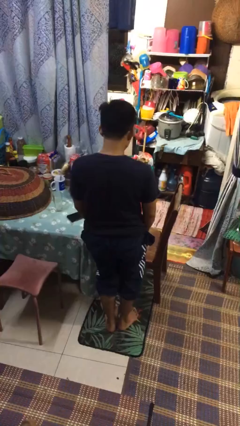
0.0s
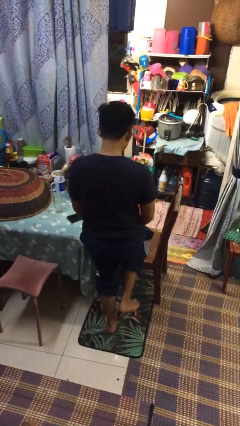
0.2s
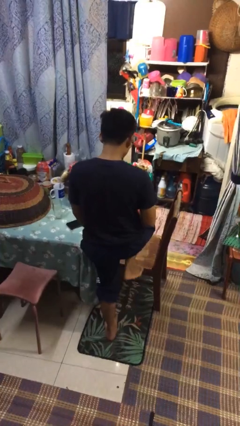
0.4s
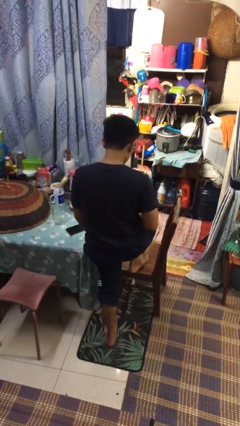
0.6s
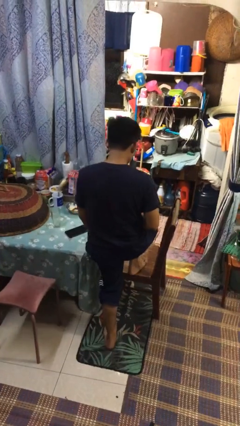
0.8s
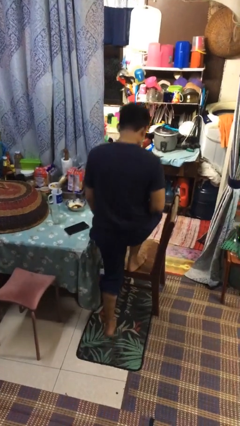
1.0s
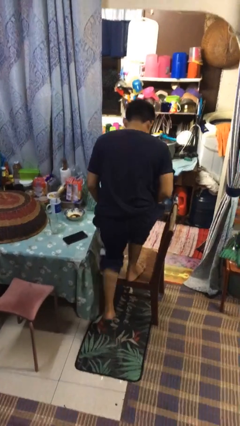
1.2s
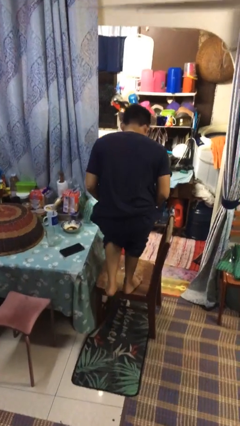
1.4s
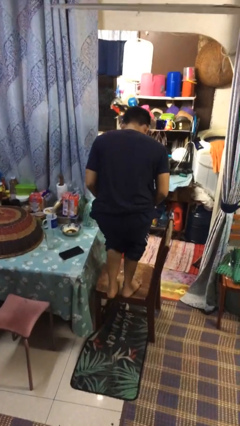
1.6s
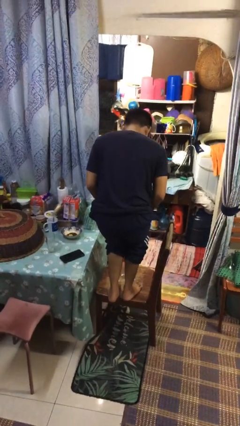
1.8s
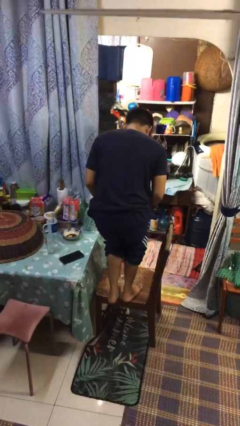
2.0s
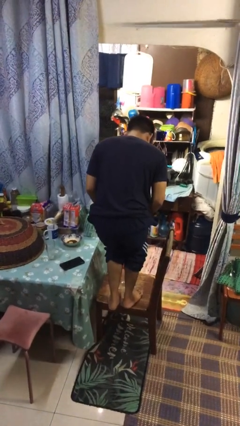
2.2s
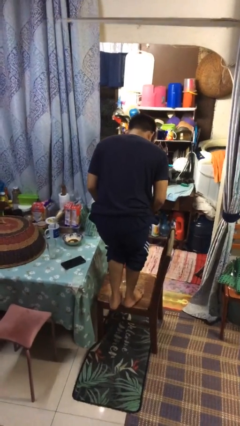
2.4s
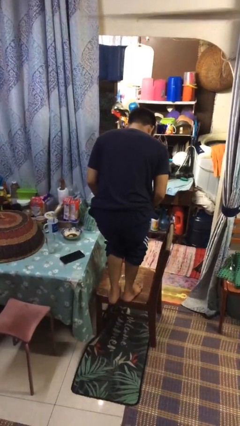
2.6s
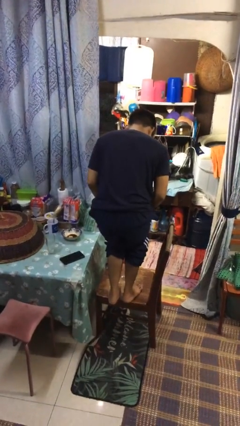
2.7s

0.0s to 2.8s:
person climbs on chair

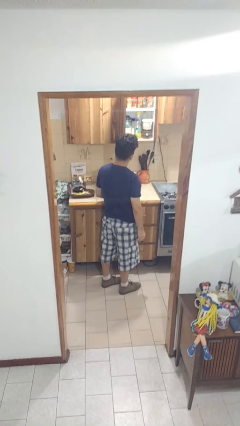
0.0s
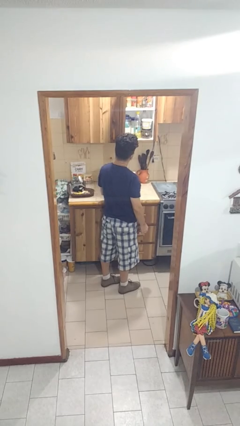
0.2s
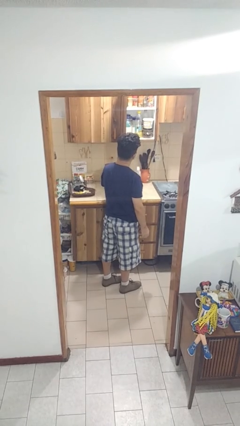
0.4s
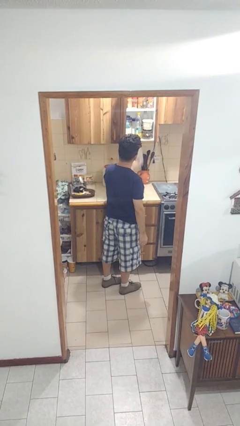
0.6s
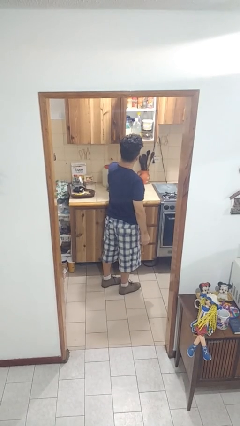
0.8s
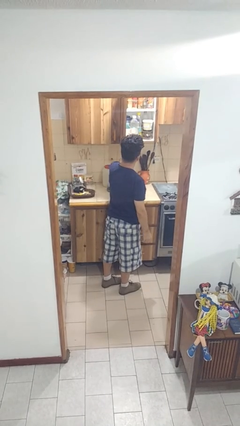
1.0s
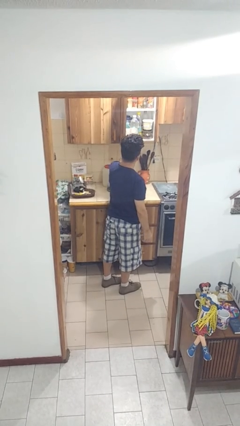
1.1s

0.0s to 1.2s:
person puts object in cabinet

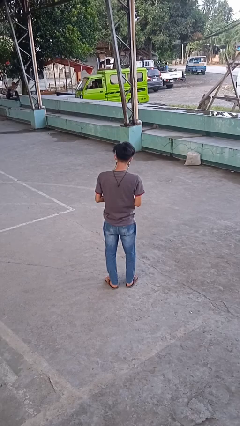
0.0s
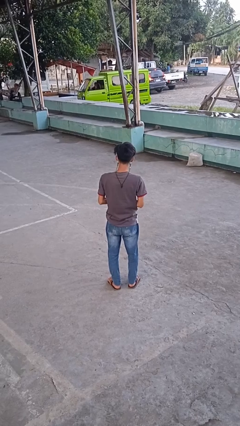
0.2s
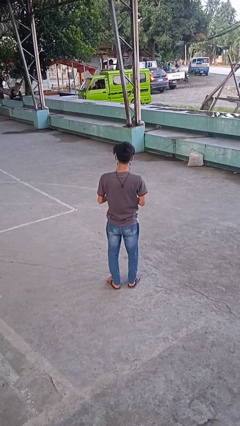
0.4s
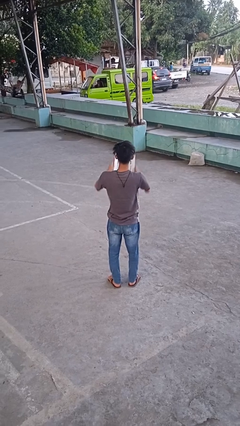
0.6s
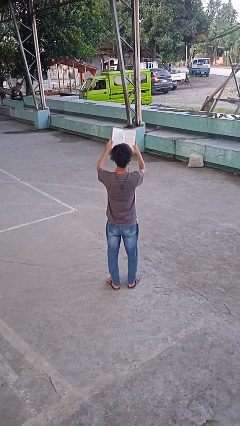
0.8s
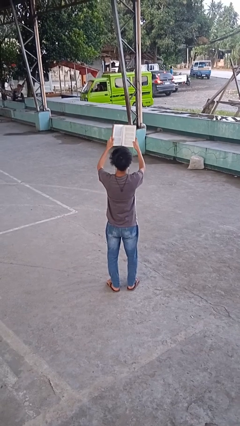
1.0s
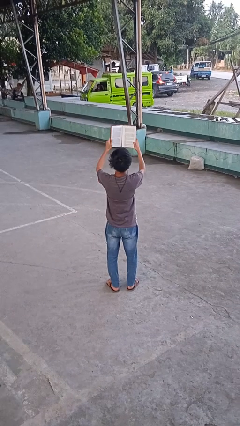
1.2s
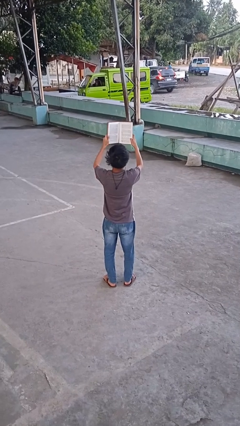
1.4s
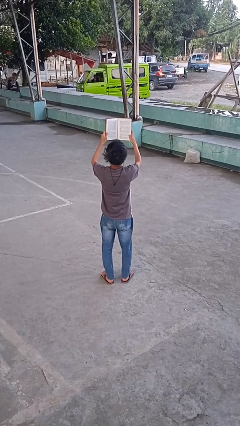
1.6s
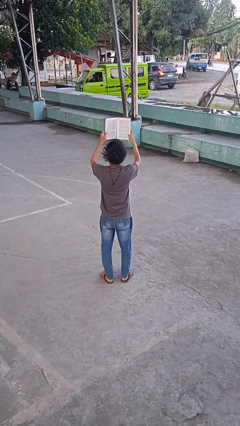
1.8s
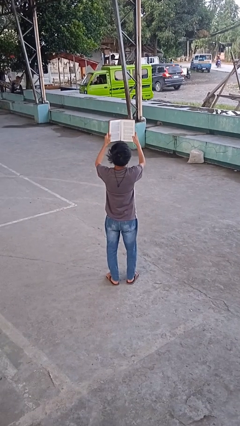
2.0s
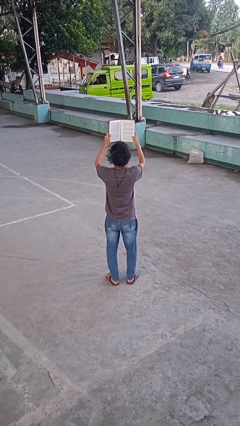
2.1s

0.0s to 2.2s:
person reads book

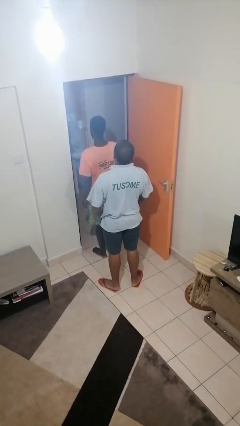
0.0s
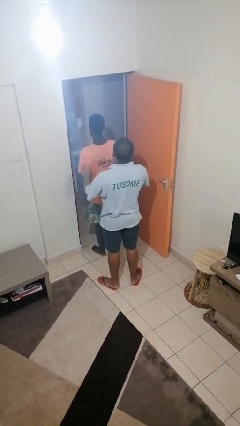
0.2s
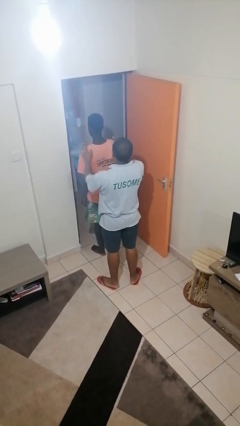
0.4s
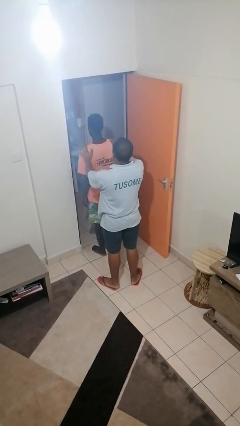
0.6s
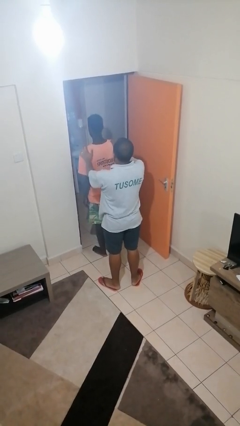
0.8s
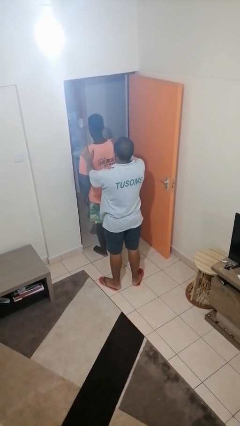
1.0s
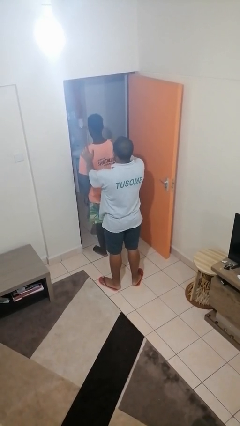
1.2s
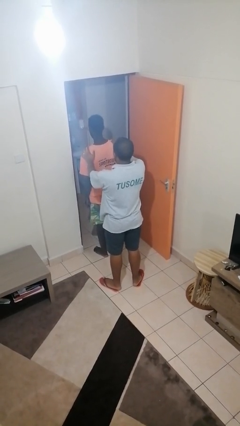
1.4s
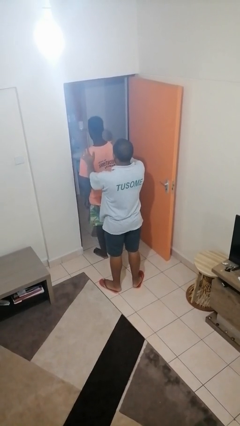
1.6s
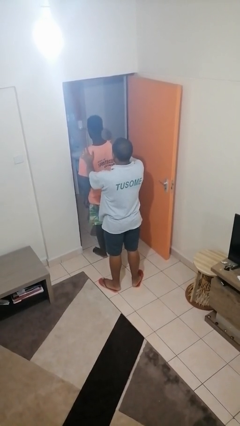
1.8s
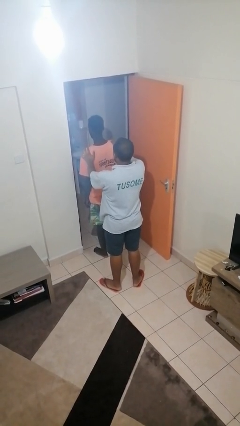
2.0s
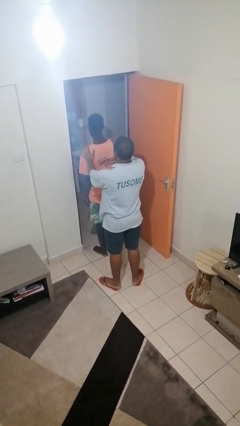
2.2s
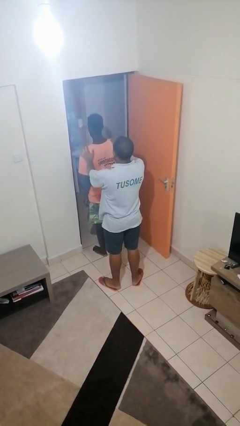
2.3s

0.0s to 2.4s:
person grabs person by shoulder

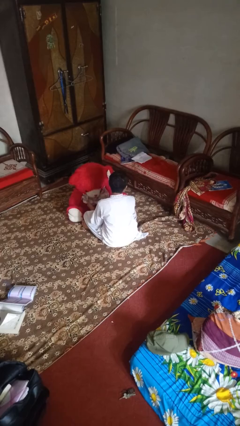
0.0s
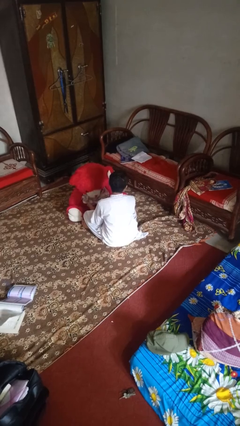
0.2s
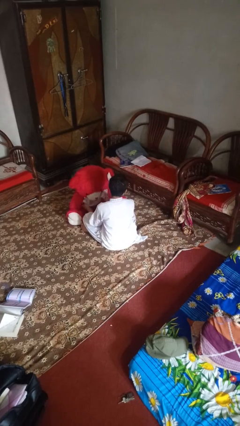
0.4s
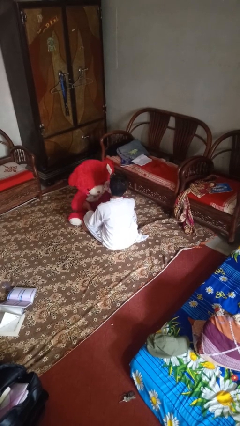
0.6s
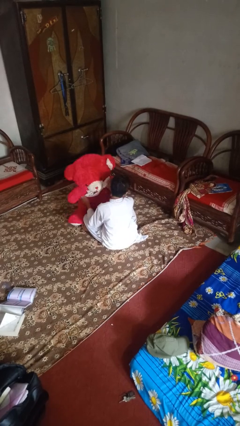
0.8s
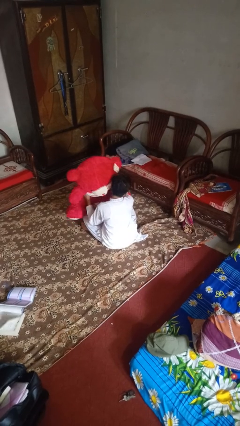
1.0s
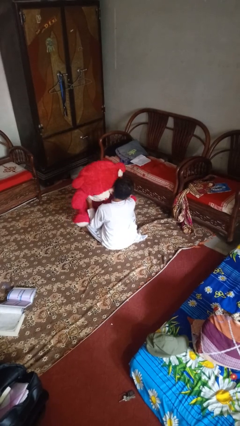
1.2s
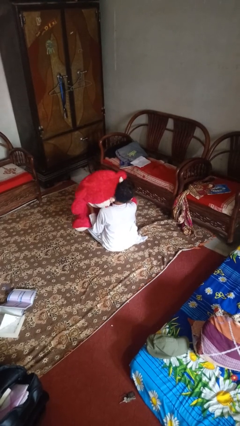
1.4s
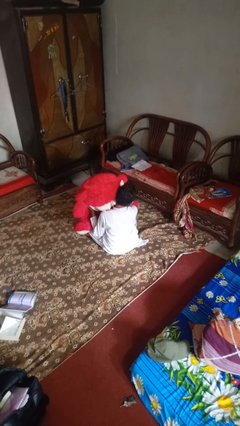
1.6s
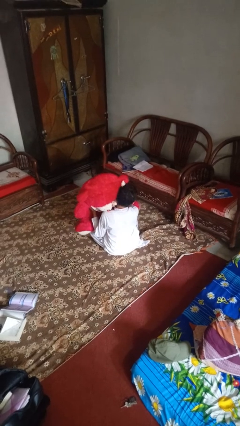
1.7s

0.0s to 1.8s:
person hugs stuffed animal

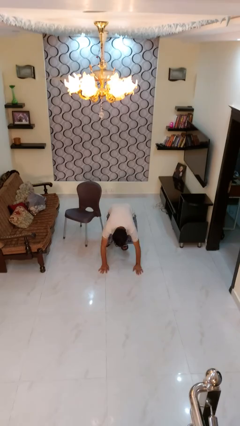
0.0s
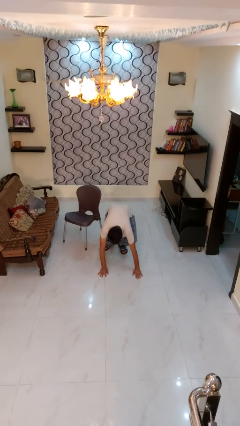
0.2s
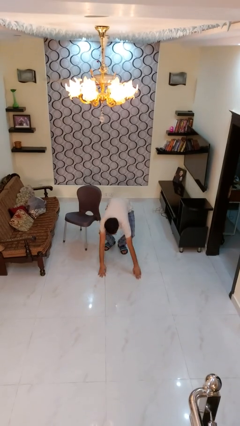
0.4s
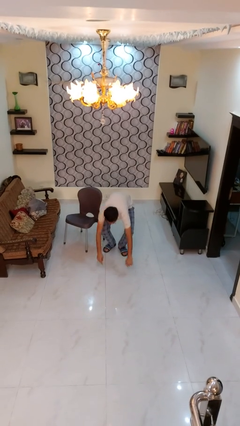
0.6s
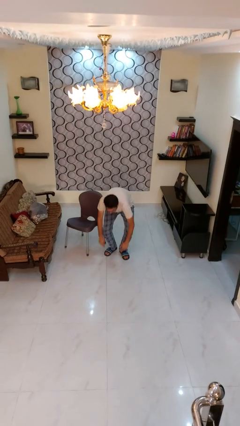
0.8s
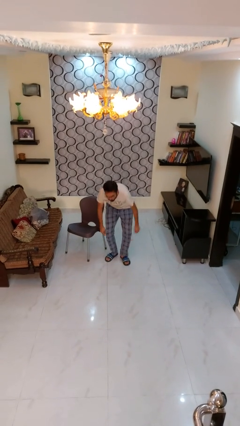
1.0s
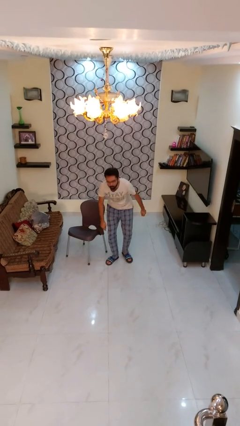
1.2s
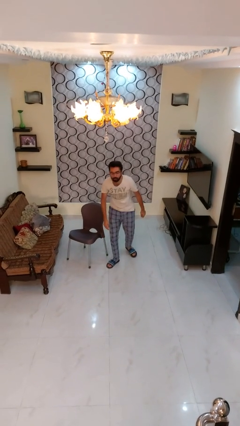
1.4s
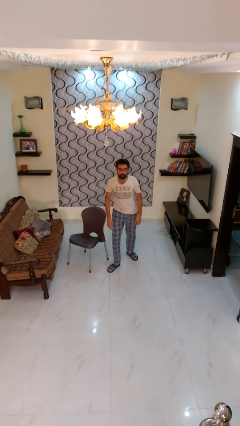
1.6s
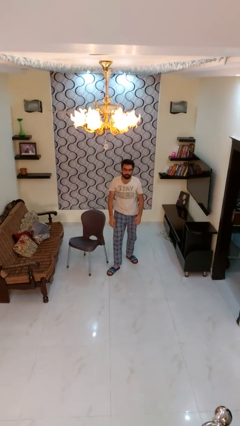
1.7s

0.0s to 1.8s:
person stands up from floor

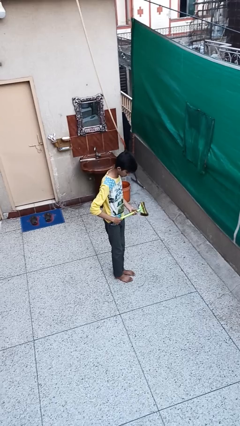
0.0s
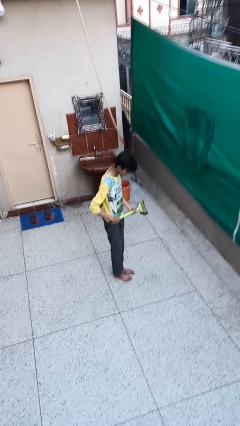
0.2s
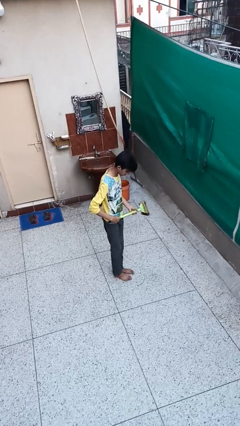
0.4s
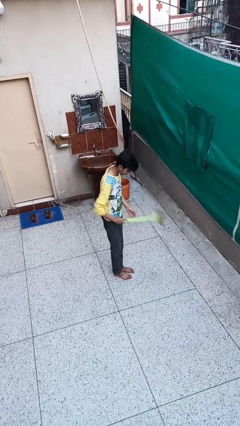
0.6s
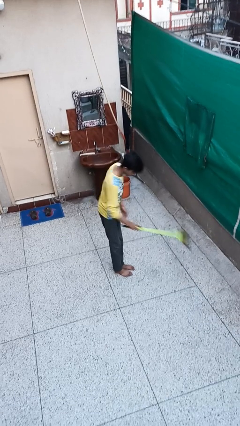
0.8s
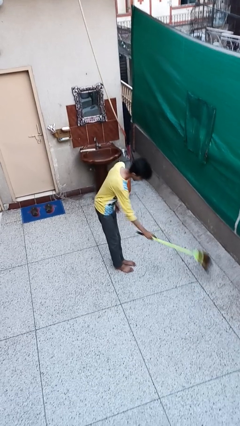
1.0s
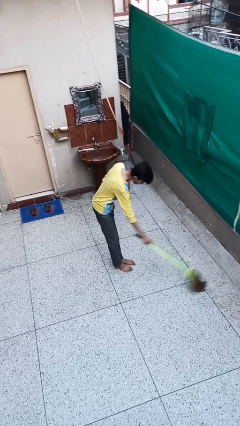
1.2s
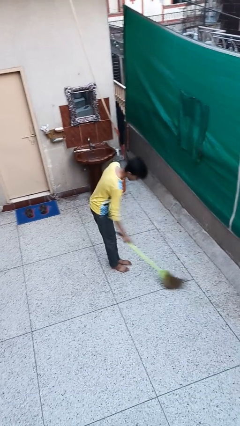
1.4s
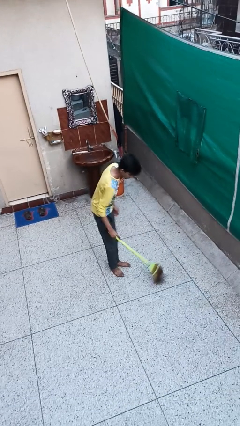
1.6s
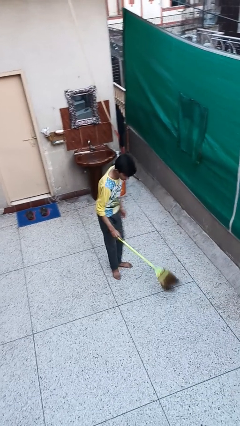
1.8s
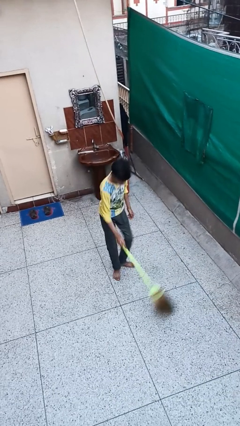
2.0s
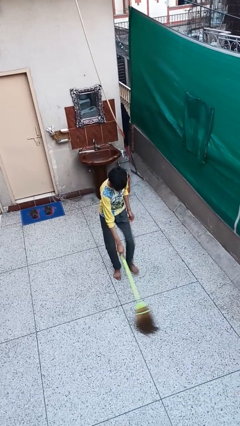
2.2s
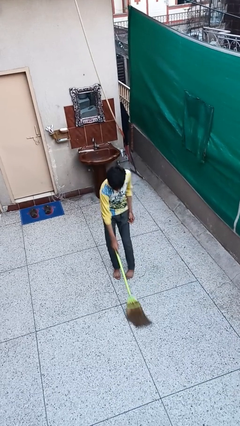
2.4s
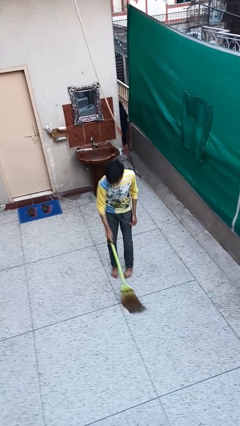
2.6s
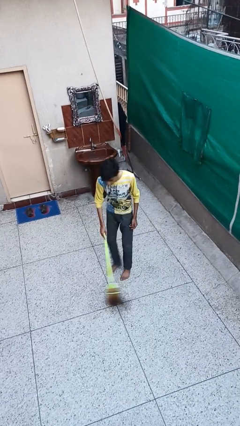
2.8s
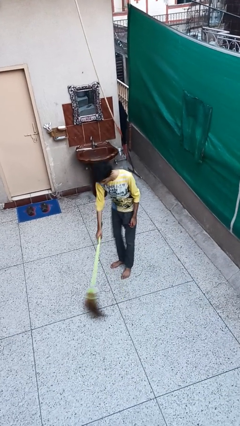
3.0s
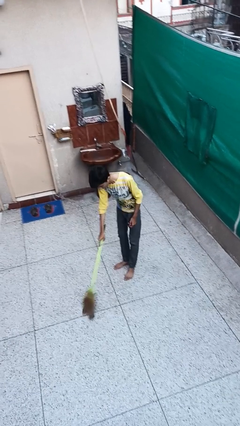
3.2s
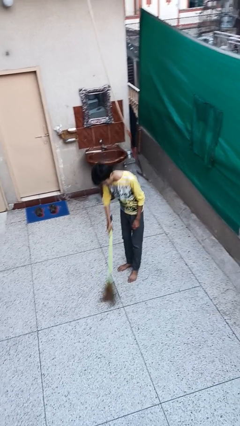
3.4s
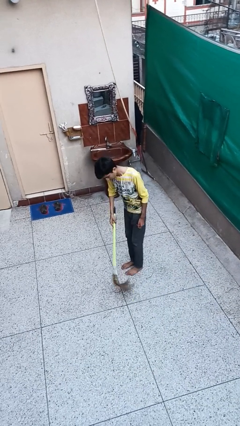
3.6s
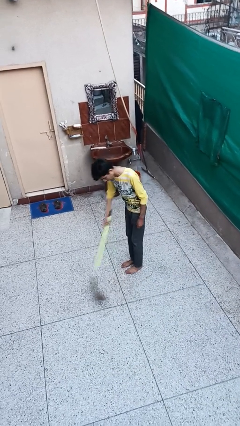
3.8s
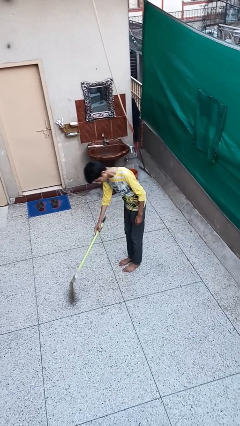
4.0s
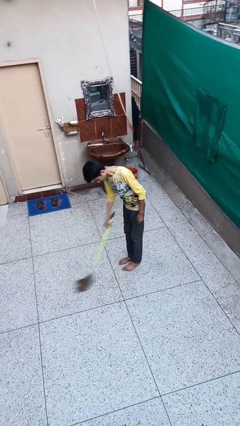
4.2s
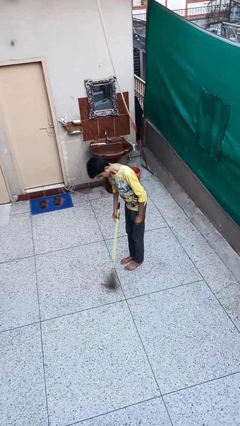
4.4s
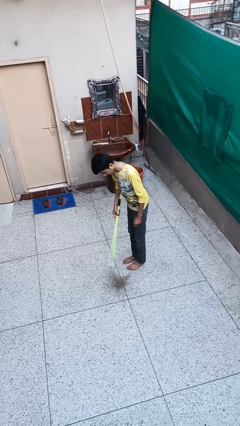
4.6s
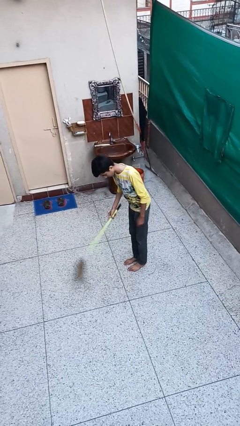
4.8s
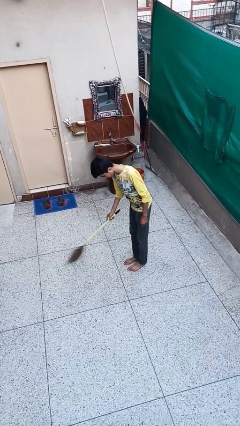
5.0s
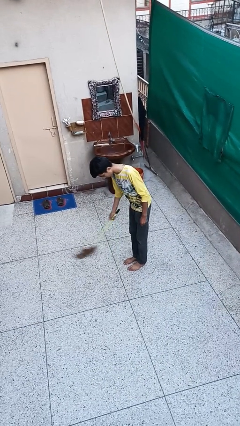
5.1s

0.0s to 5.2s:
person sweeps floor
